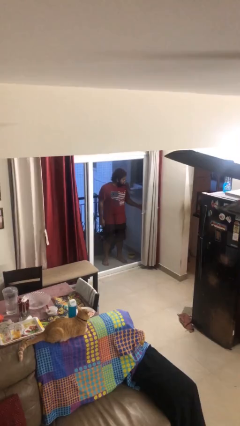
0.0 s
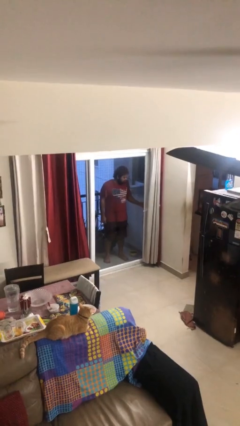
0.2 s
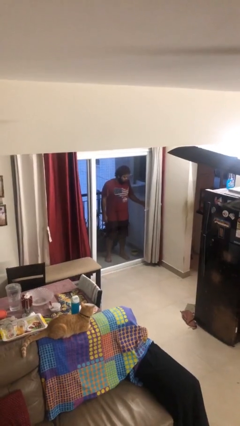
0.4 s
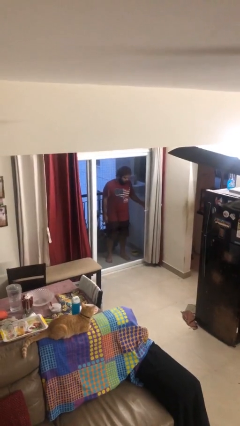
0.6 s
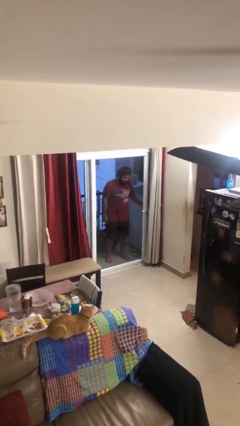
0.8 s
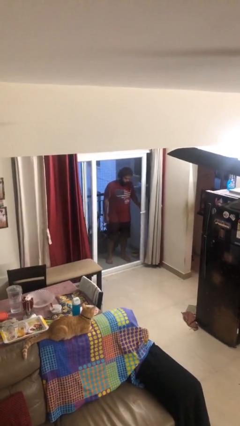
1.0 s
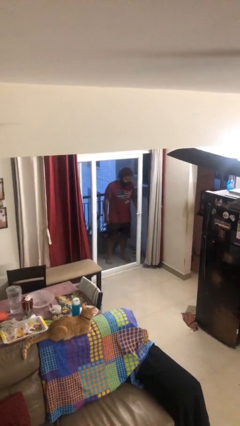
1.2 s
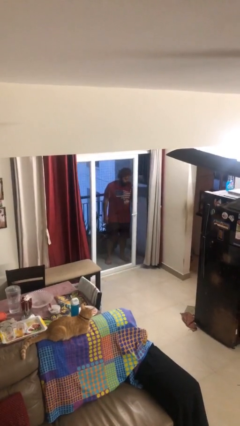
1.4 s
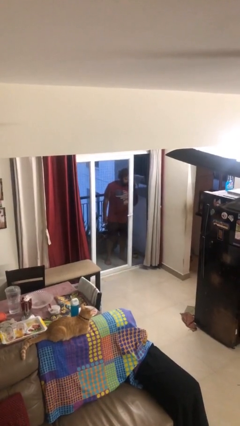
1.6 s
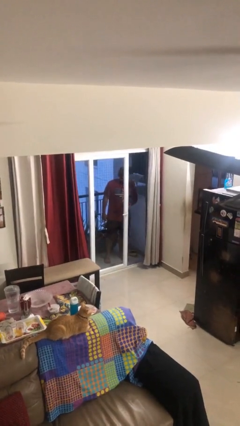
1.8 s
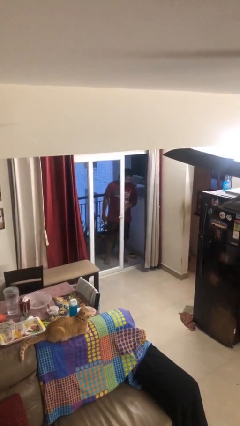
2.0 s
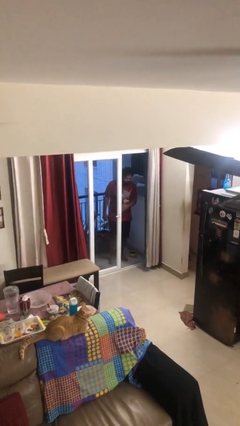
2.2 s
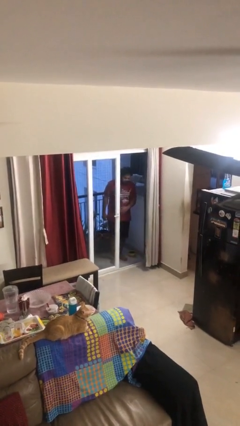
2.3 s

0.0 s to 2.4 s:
person opens facility door

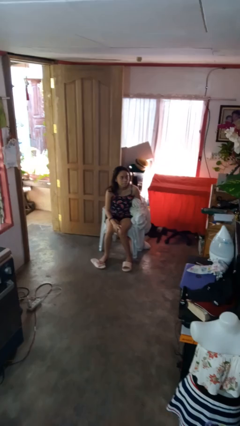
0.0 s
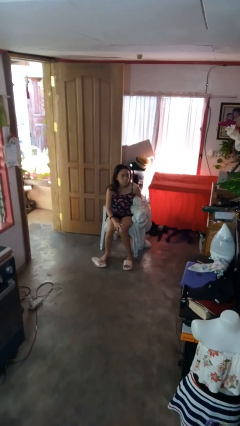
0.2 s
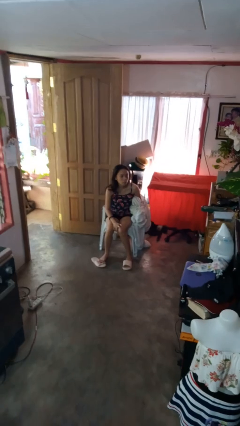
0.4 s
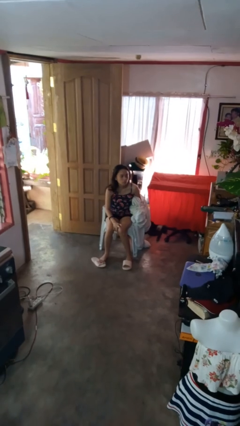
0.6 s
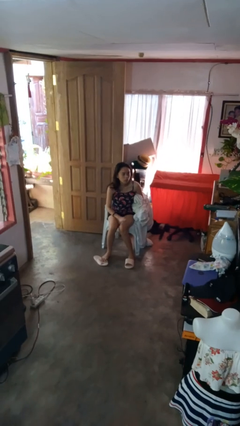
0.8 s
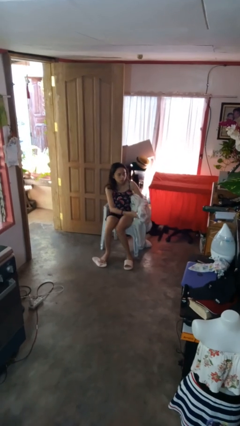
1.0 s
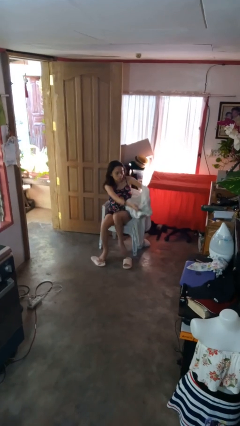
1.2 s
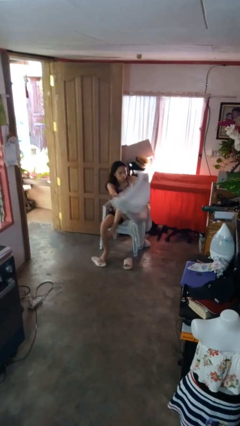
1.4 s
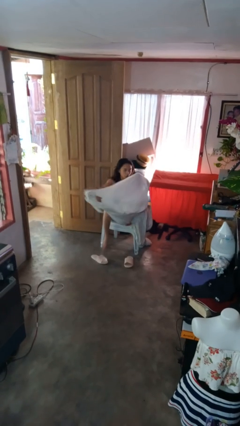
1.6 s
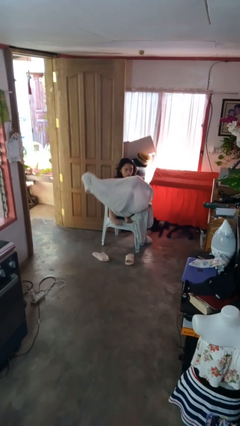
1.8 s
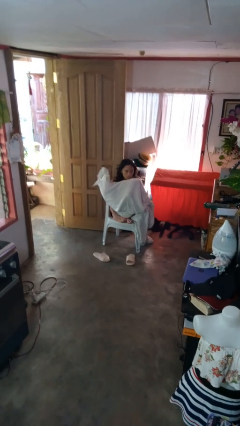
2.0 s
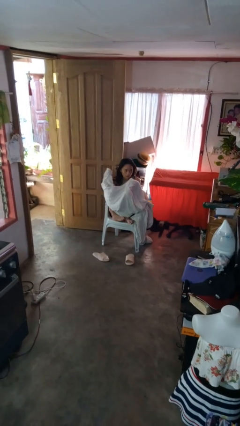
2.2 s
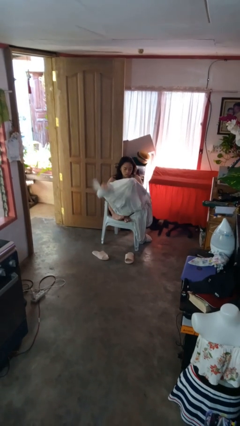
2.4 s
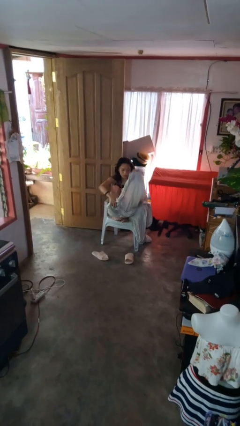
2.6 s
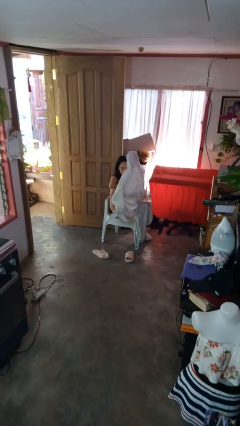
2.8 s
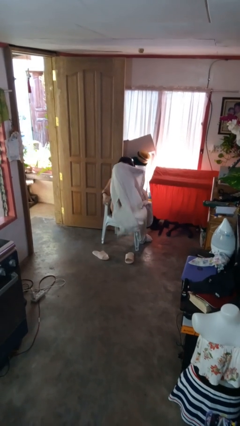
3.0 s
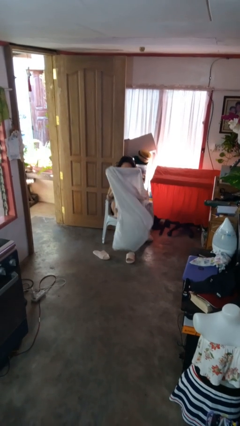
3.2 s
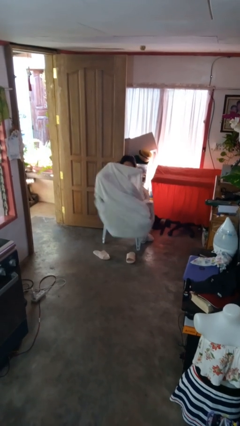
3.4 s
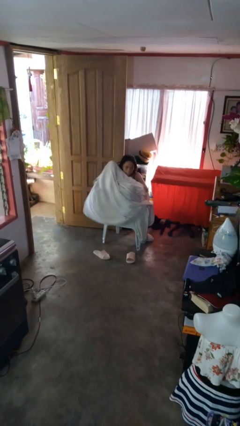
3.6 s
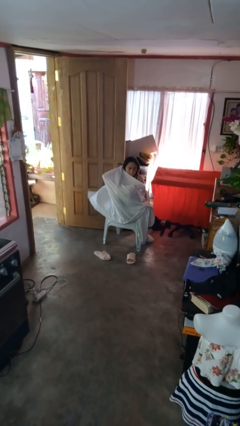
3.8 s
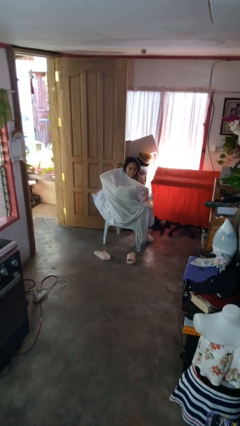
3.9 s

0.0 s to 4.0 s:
person covers with blanket

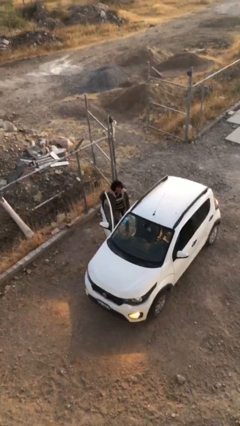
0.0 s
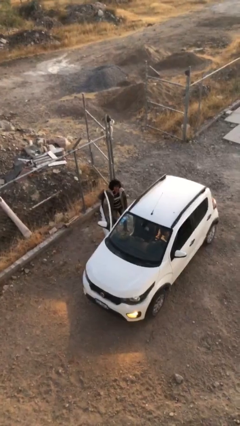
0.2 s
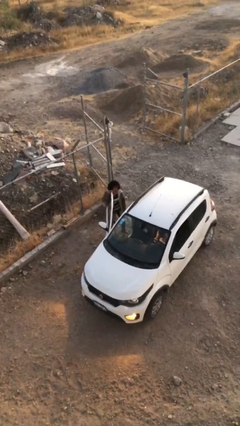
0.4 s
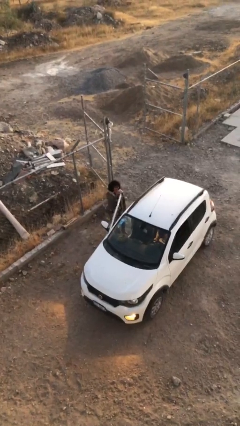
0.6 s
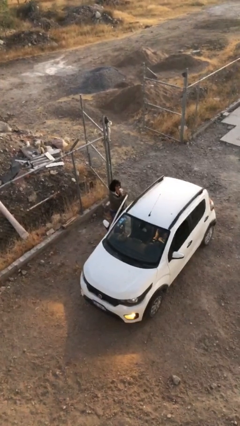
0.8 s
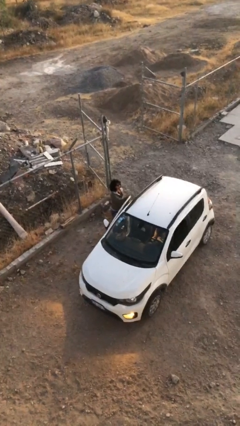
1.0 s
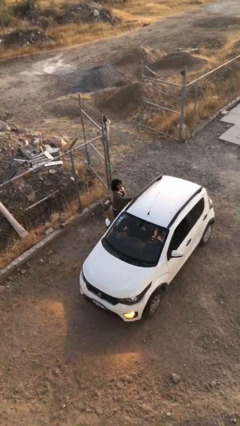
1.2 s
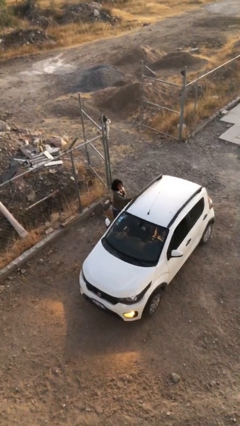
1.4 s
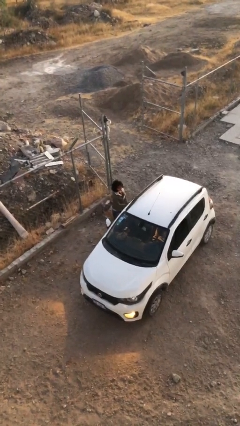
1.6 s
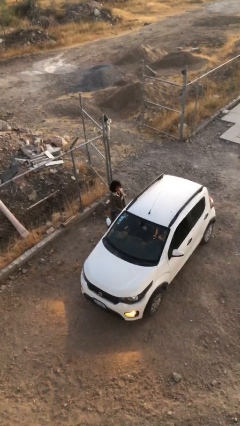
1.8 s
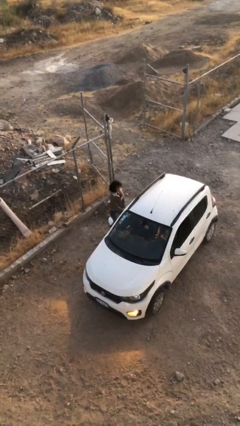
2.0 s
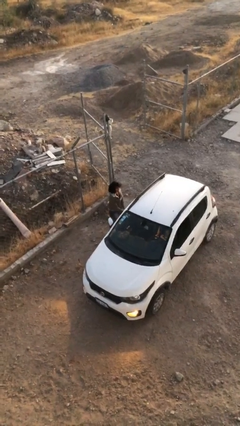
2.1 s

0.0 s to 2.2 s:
person closes car door

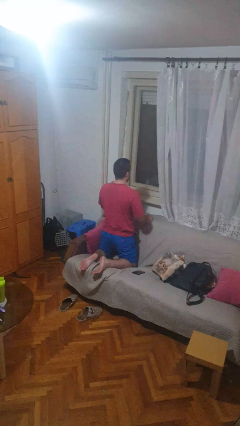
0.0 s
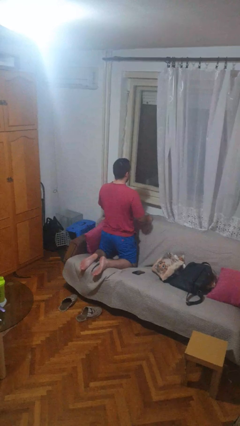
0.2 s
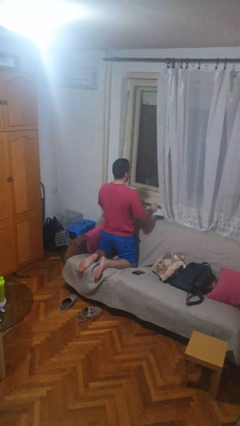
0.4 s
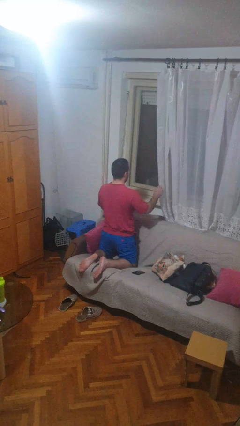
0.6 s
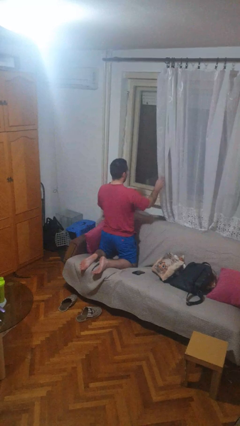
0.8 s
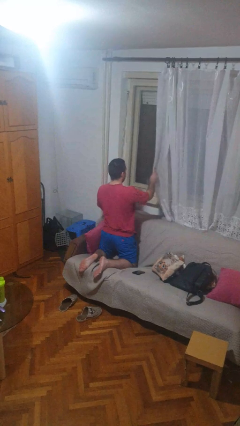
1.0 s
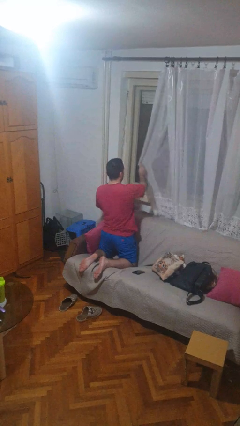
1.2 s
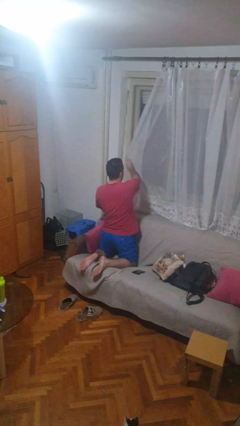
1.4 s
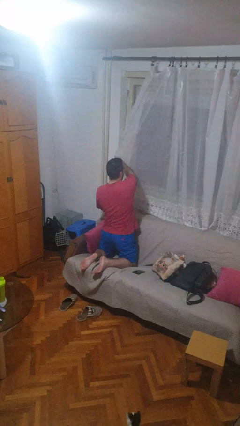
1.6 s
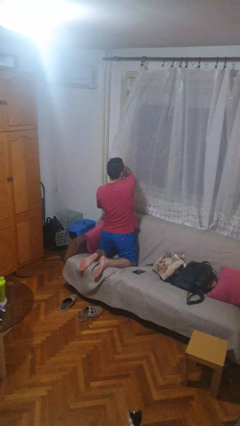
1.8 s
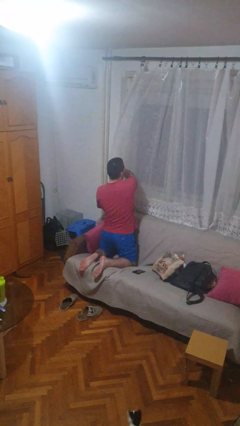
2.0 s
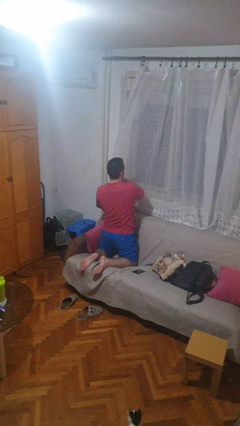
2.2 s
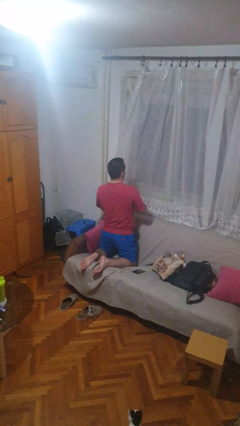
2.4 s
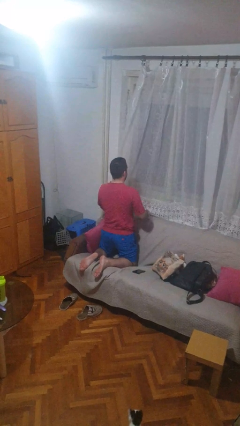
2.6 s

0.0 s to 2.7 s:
person closes curtains

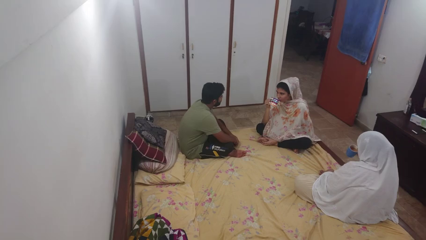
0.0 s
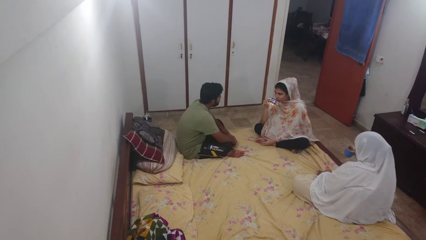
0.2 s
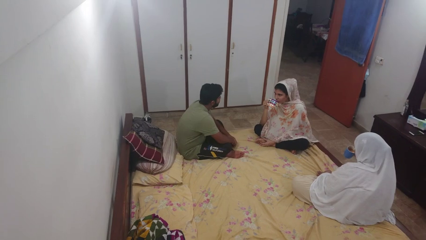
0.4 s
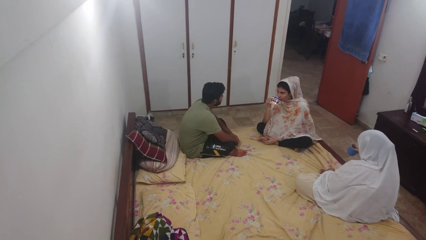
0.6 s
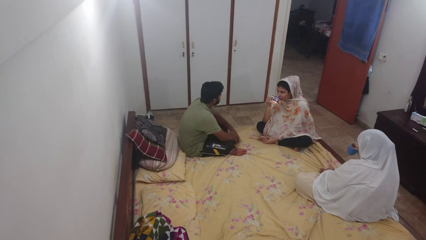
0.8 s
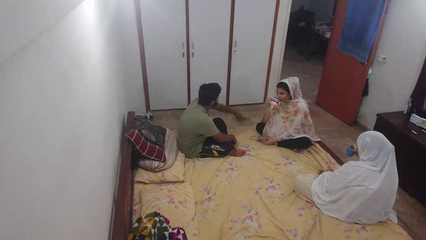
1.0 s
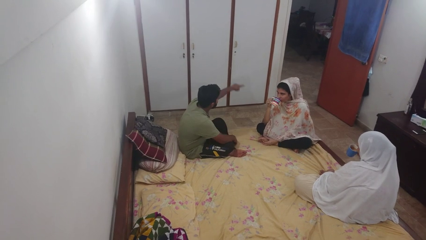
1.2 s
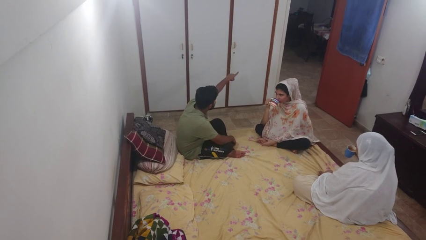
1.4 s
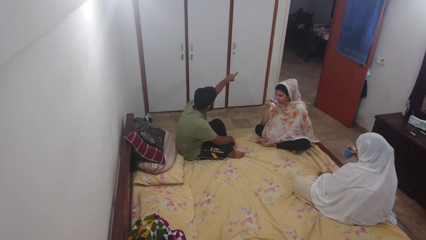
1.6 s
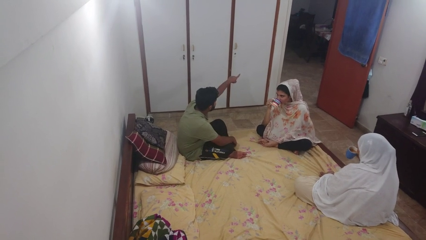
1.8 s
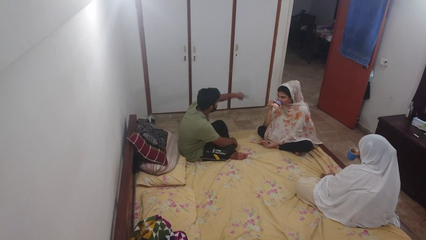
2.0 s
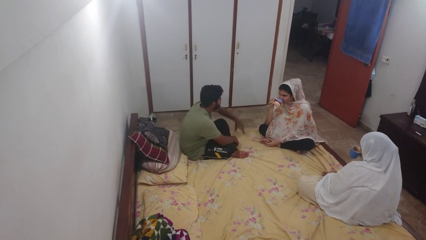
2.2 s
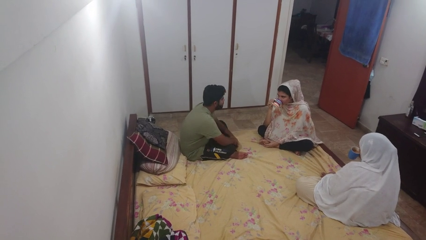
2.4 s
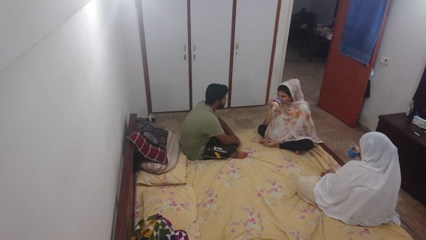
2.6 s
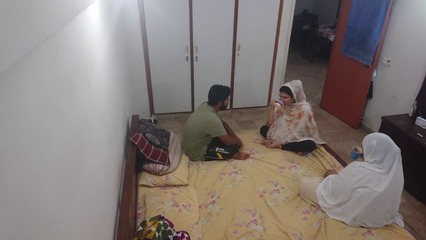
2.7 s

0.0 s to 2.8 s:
person points at person

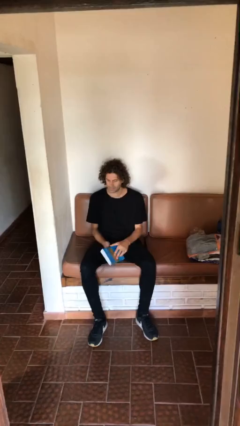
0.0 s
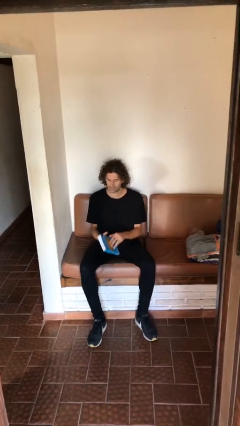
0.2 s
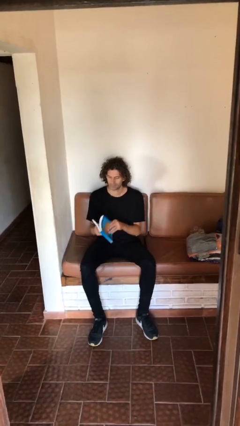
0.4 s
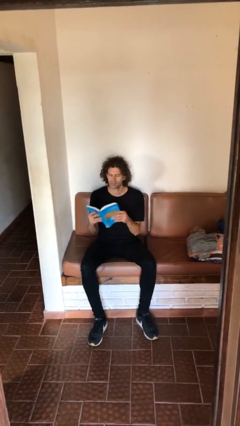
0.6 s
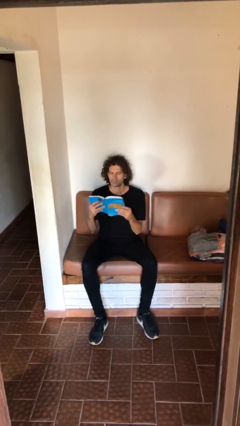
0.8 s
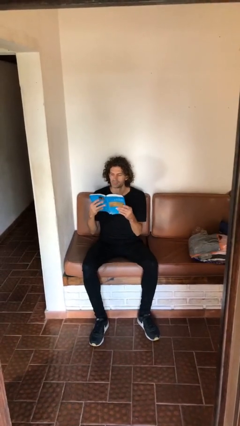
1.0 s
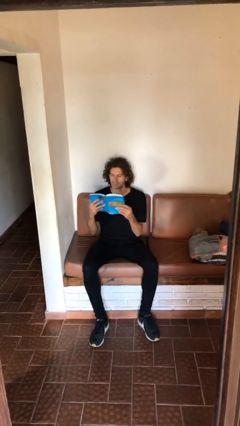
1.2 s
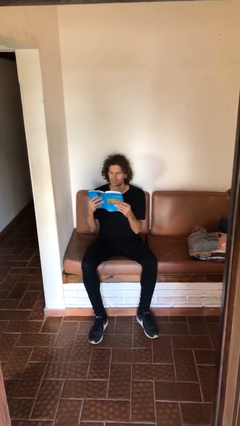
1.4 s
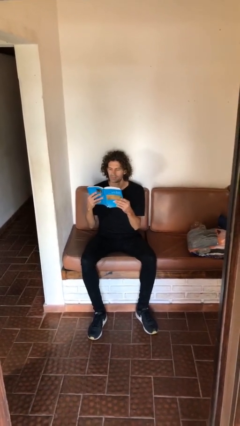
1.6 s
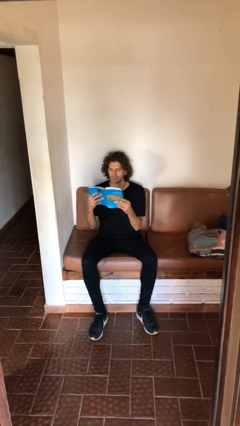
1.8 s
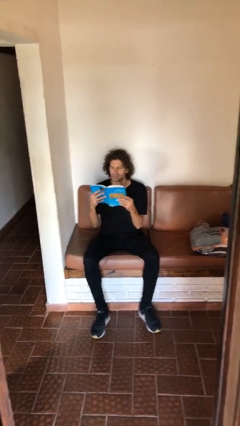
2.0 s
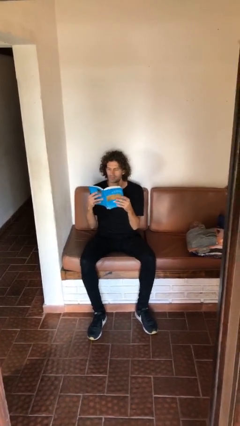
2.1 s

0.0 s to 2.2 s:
person reads document

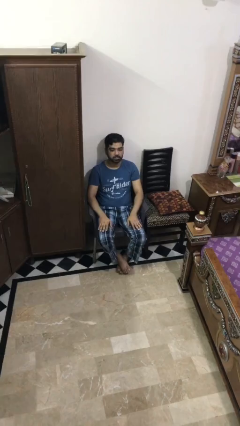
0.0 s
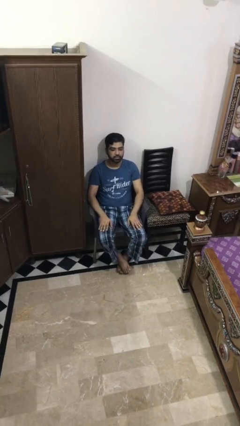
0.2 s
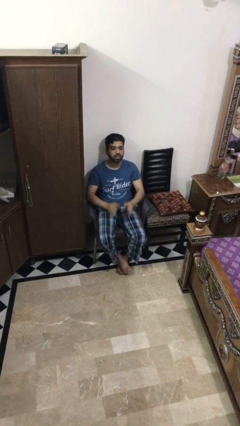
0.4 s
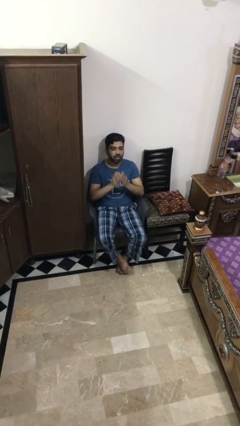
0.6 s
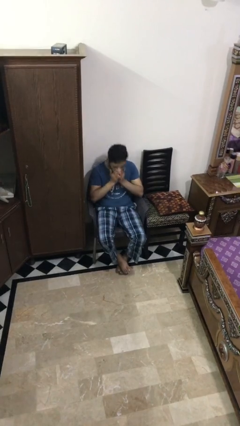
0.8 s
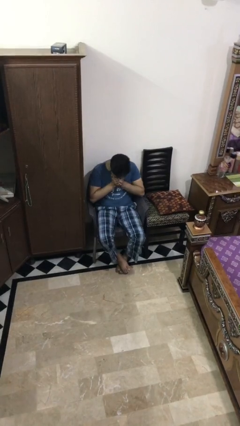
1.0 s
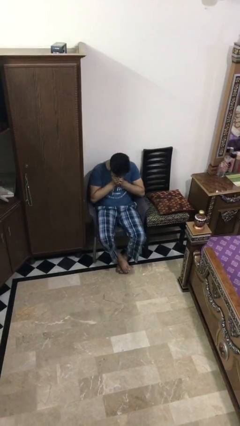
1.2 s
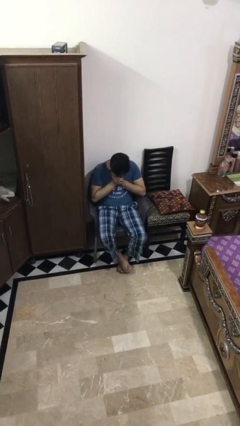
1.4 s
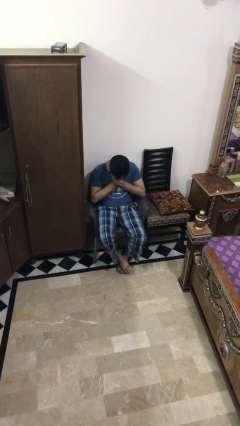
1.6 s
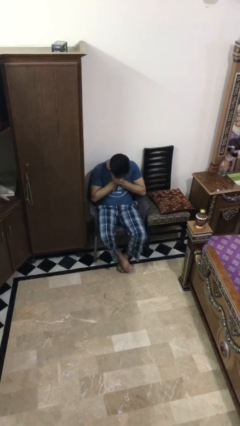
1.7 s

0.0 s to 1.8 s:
person sneezes into hand
